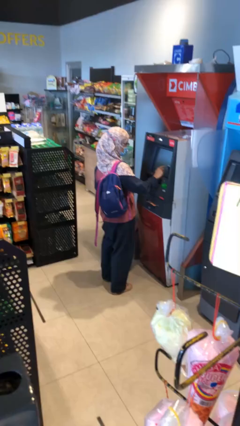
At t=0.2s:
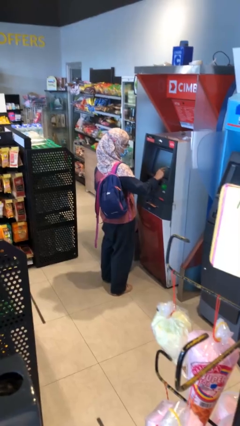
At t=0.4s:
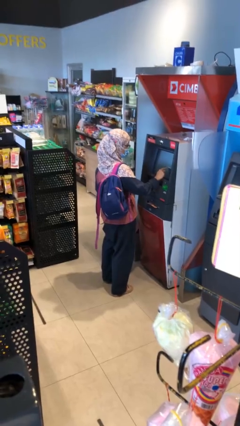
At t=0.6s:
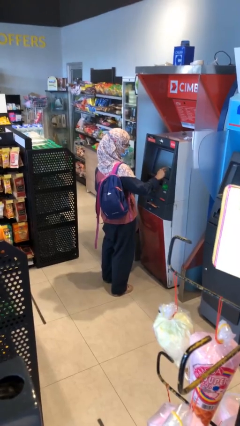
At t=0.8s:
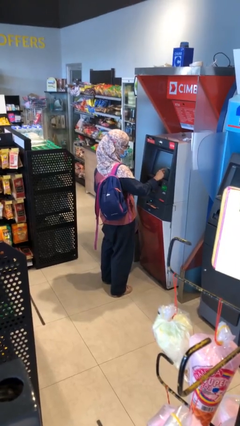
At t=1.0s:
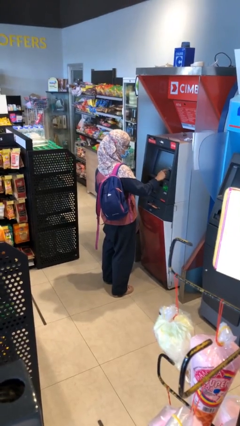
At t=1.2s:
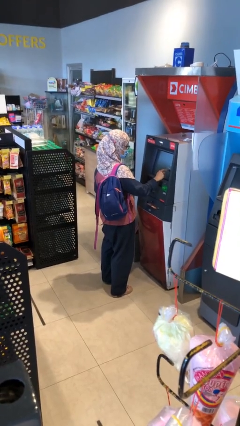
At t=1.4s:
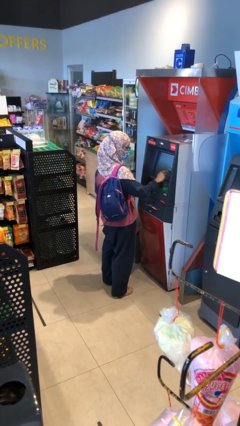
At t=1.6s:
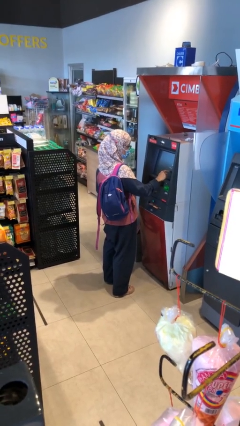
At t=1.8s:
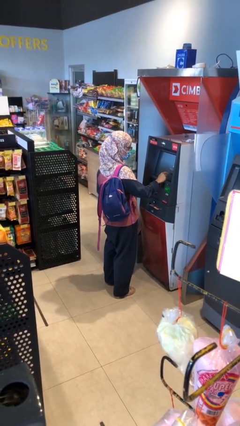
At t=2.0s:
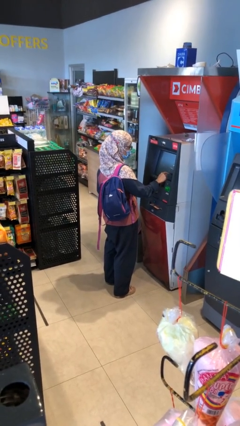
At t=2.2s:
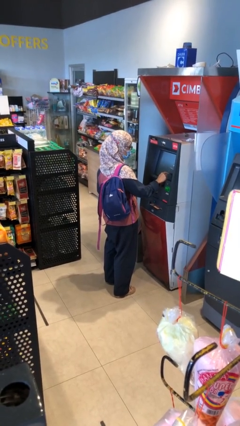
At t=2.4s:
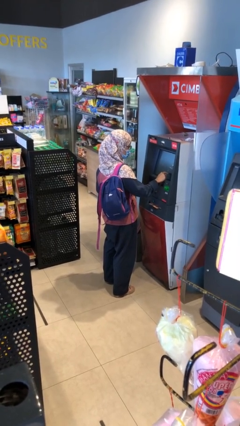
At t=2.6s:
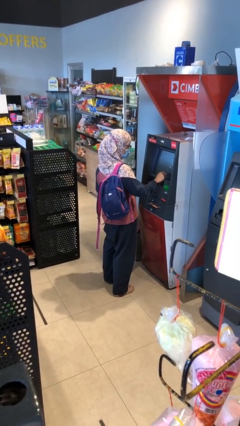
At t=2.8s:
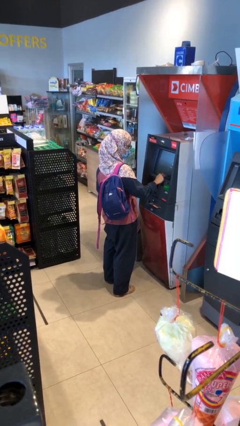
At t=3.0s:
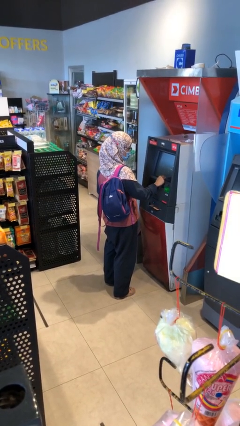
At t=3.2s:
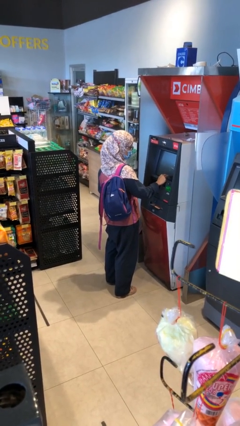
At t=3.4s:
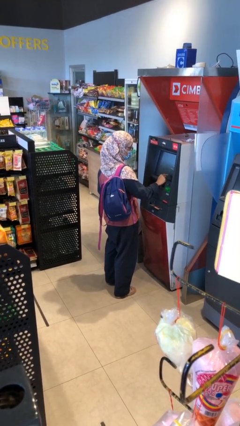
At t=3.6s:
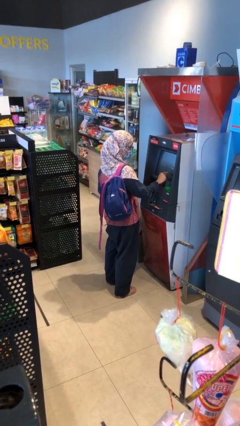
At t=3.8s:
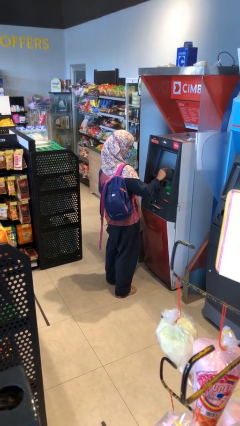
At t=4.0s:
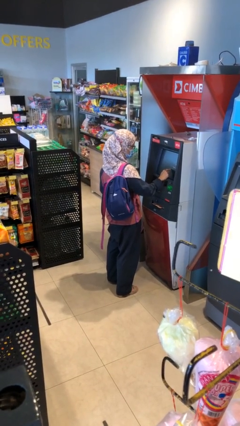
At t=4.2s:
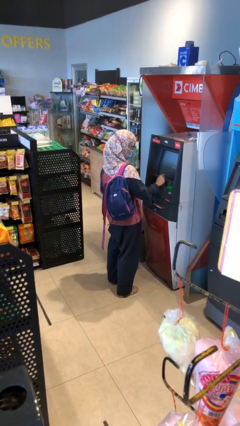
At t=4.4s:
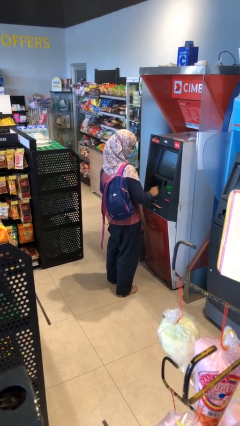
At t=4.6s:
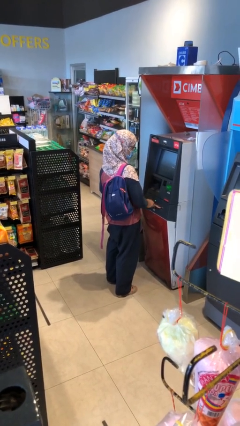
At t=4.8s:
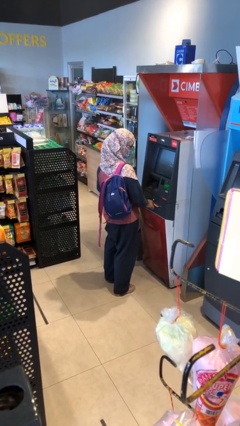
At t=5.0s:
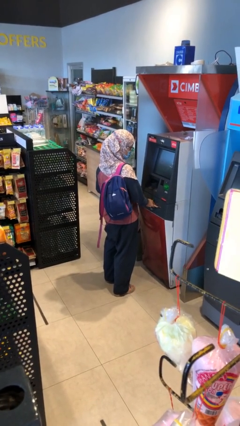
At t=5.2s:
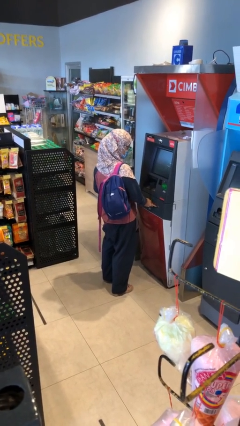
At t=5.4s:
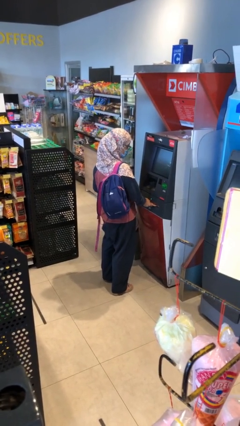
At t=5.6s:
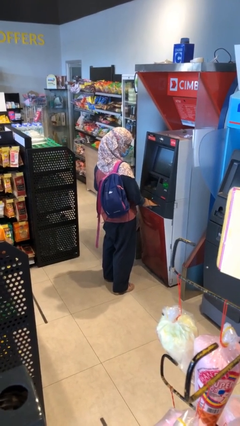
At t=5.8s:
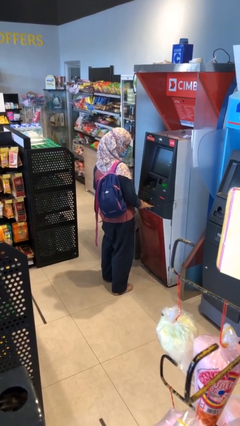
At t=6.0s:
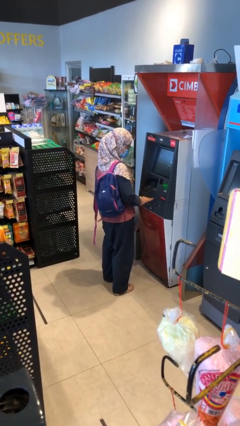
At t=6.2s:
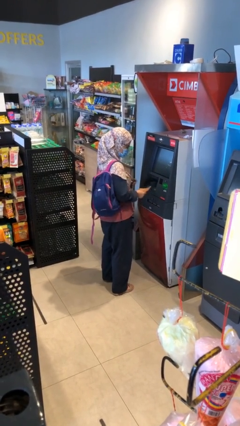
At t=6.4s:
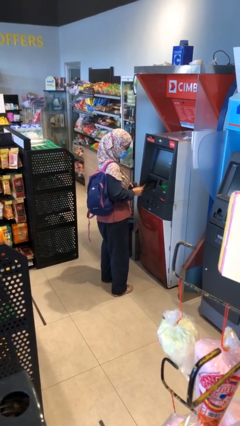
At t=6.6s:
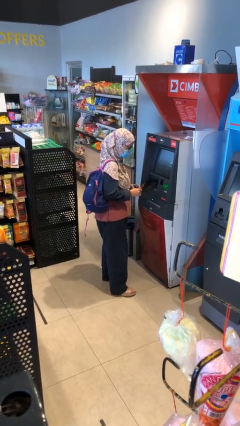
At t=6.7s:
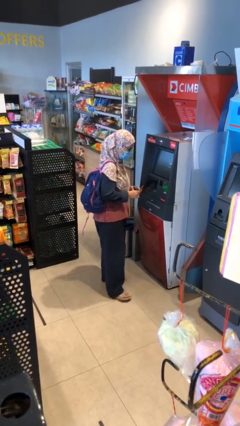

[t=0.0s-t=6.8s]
person purchases from machine

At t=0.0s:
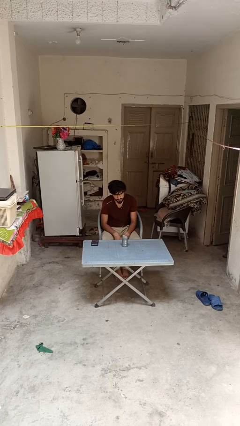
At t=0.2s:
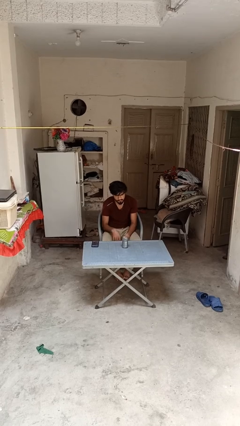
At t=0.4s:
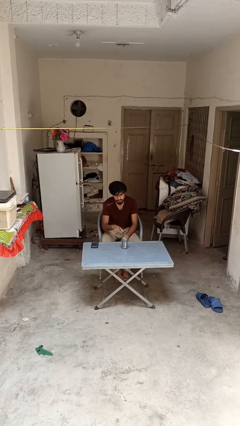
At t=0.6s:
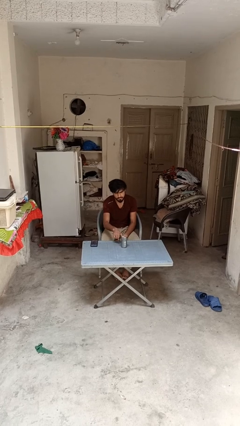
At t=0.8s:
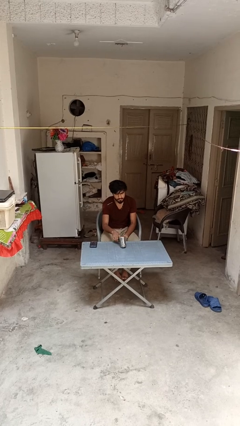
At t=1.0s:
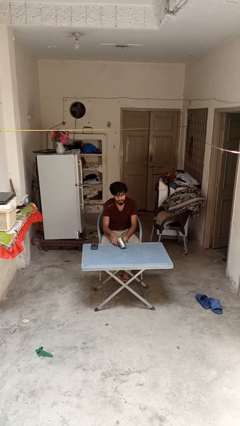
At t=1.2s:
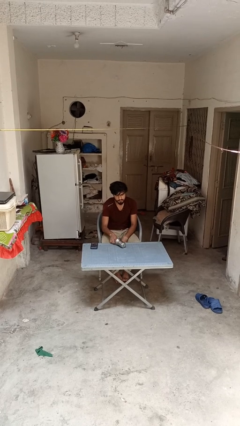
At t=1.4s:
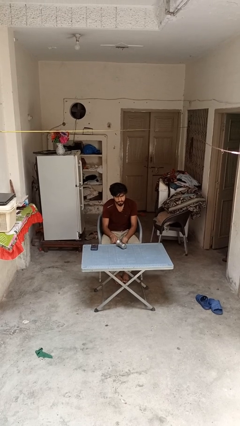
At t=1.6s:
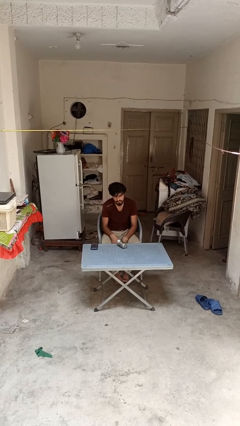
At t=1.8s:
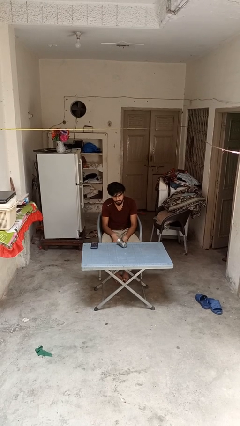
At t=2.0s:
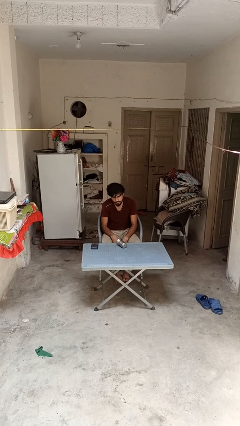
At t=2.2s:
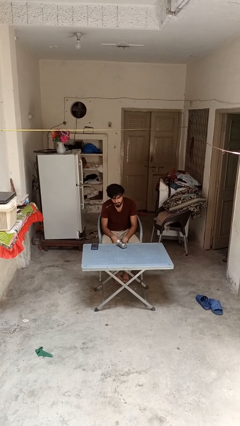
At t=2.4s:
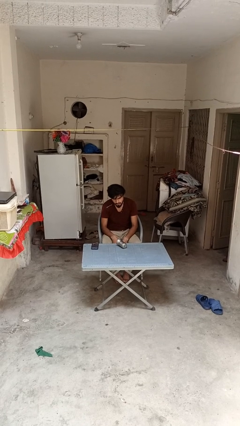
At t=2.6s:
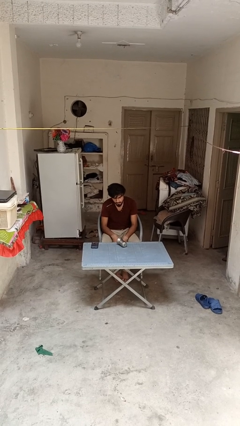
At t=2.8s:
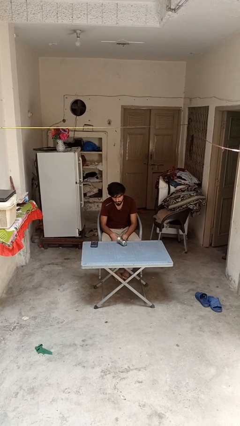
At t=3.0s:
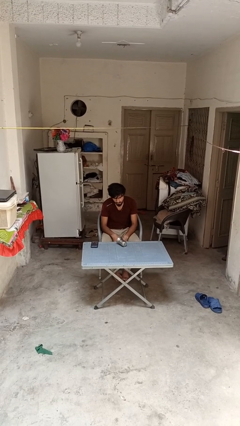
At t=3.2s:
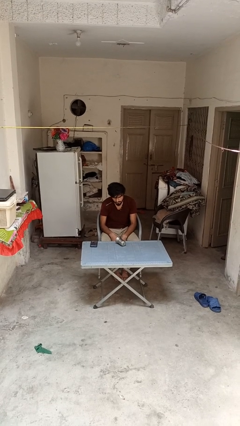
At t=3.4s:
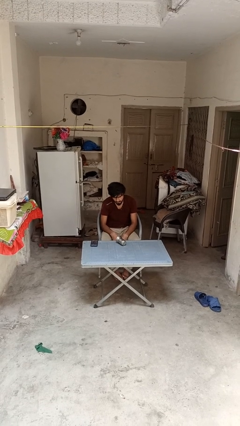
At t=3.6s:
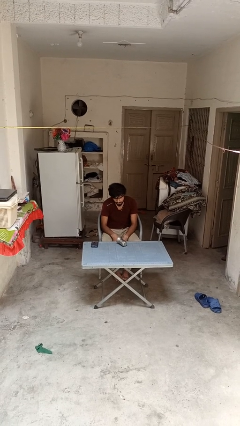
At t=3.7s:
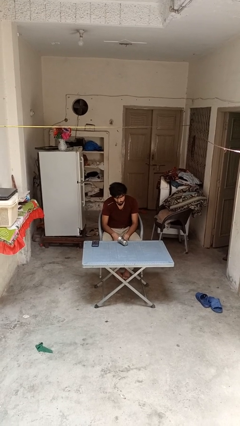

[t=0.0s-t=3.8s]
person knocks over glass

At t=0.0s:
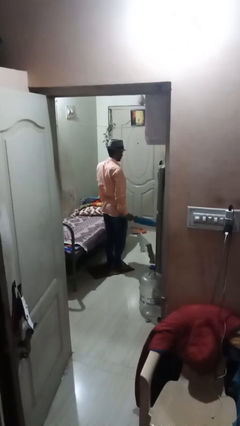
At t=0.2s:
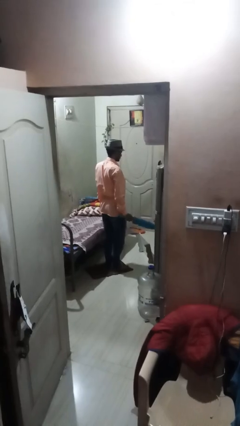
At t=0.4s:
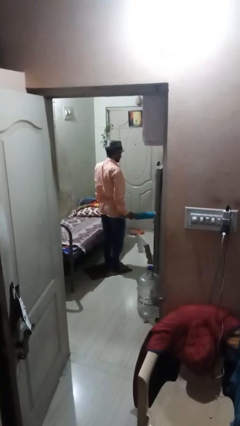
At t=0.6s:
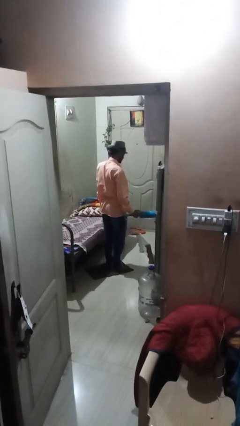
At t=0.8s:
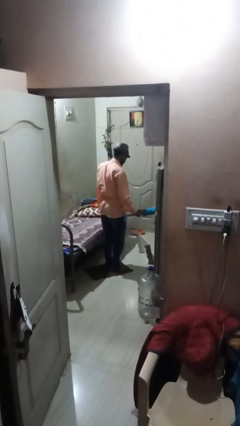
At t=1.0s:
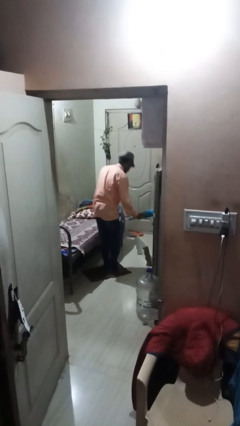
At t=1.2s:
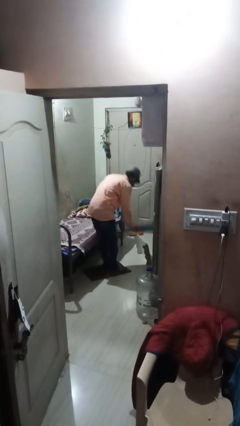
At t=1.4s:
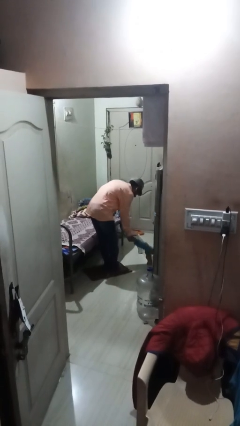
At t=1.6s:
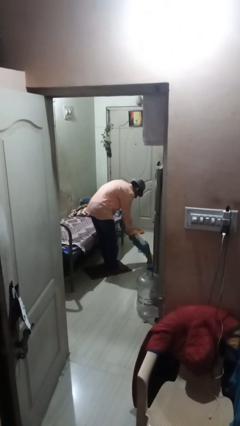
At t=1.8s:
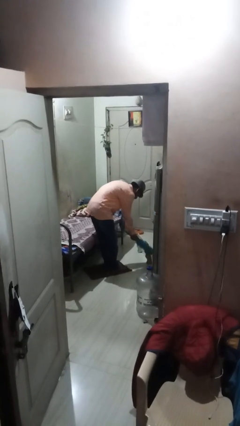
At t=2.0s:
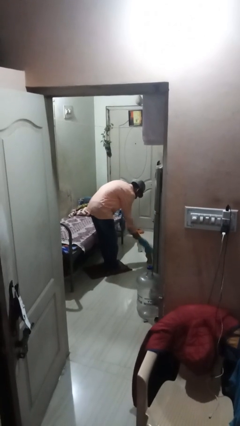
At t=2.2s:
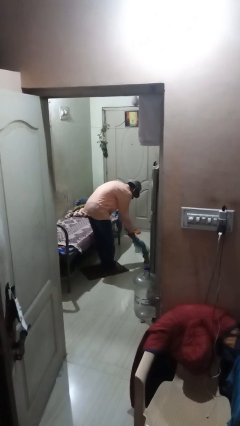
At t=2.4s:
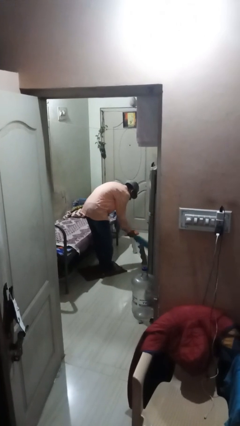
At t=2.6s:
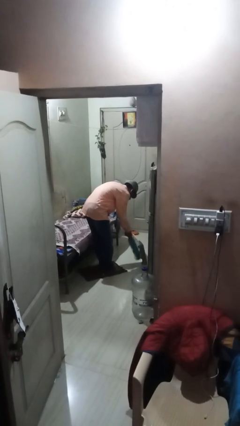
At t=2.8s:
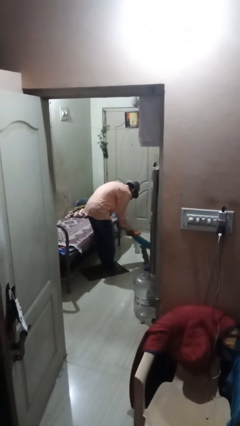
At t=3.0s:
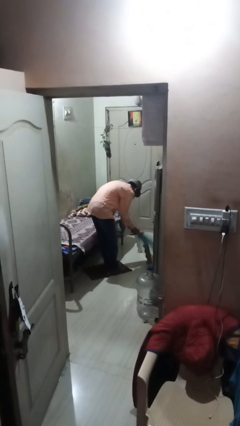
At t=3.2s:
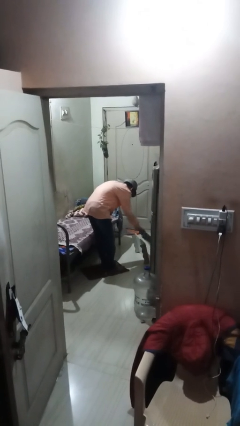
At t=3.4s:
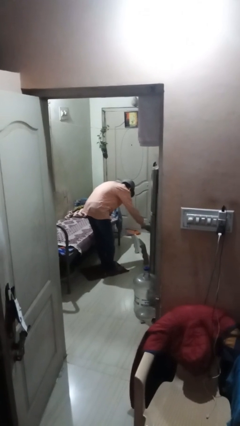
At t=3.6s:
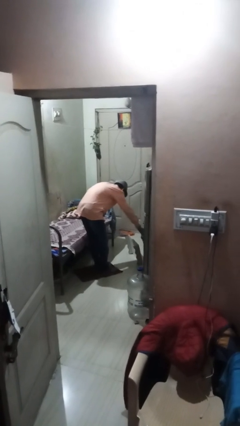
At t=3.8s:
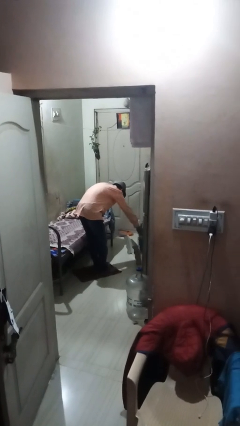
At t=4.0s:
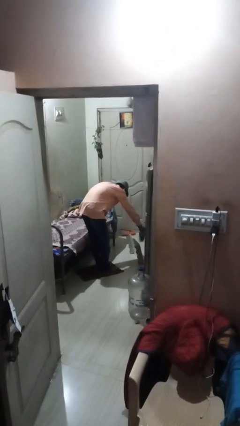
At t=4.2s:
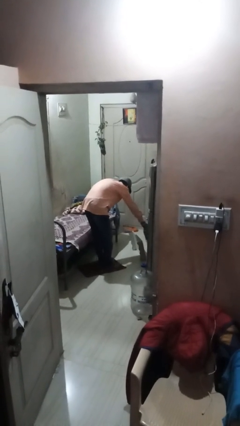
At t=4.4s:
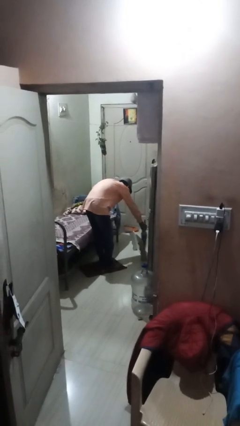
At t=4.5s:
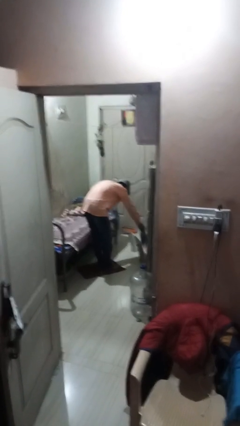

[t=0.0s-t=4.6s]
person dusts furniture

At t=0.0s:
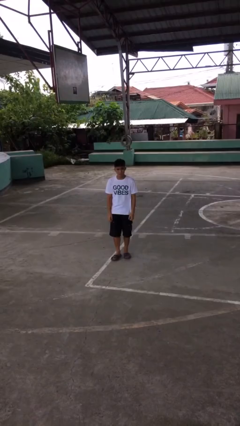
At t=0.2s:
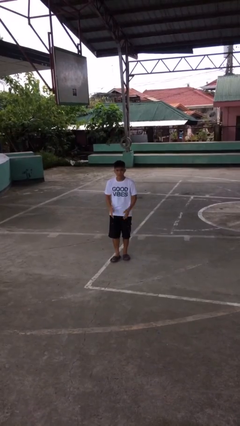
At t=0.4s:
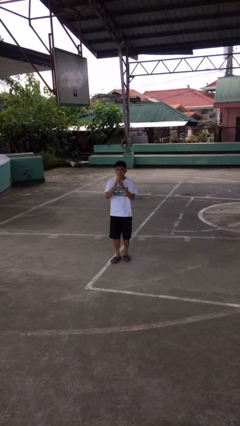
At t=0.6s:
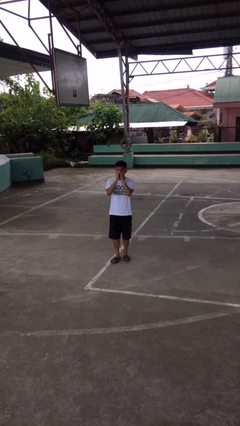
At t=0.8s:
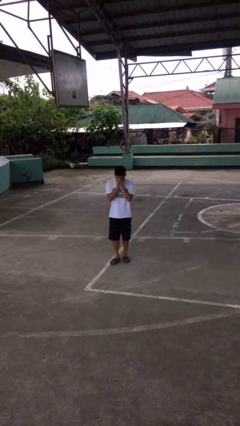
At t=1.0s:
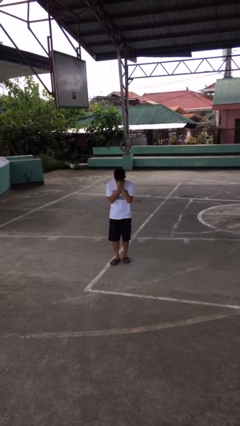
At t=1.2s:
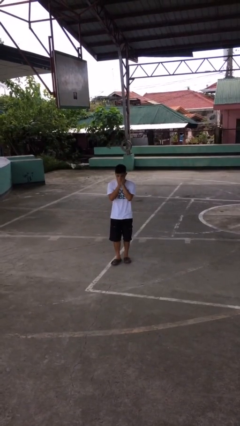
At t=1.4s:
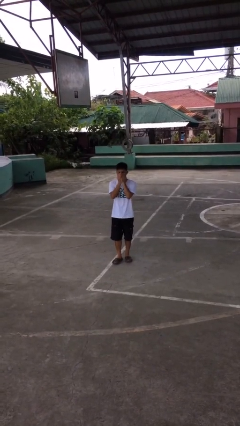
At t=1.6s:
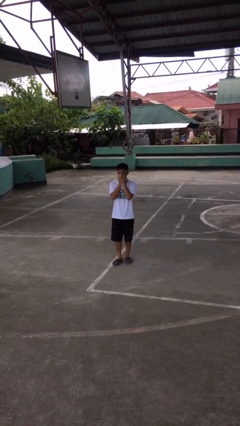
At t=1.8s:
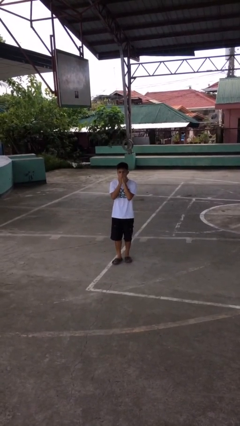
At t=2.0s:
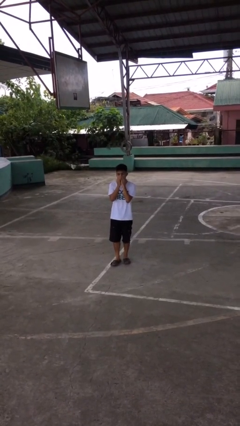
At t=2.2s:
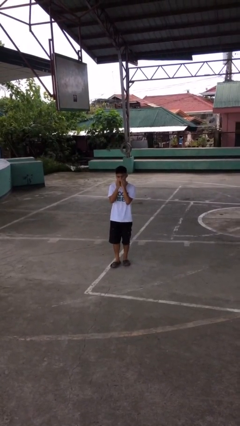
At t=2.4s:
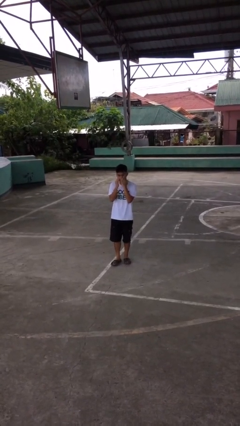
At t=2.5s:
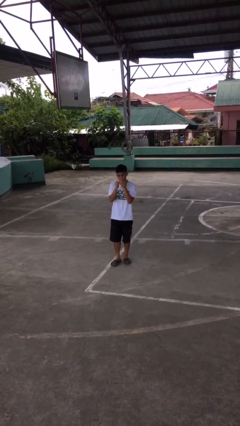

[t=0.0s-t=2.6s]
person sneezes into hand
